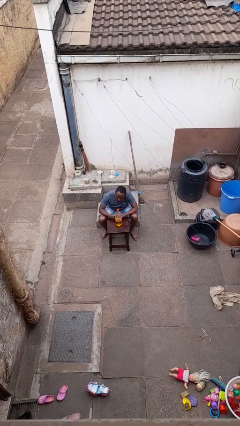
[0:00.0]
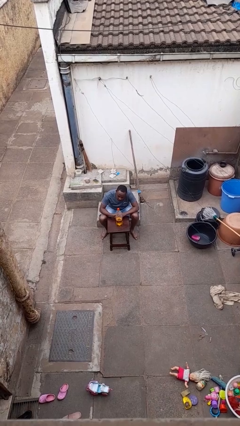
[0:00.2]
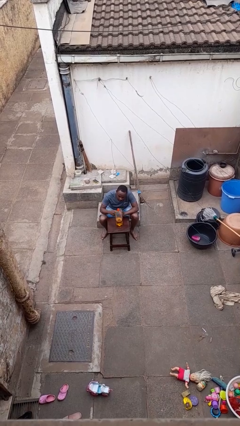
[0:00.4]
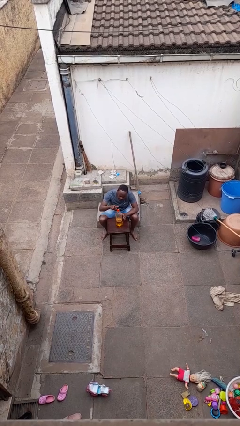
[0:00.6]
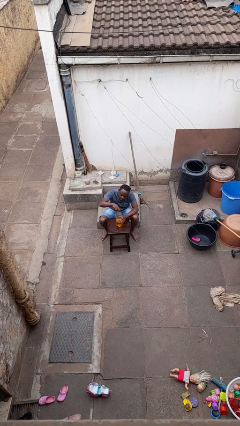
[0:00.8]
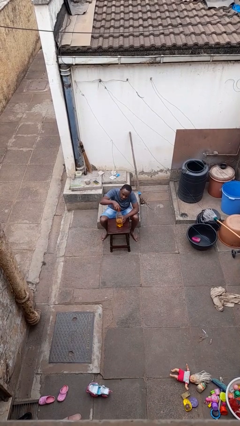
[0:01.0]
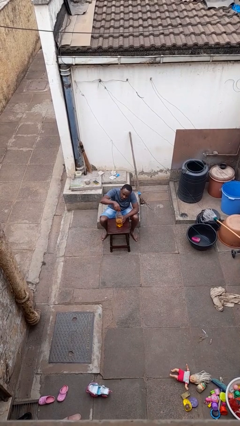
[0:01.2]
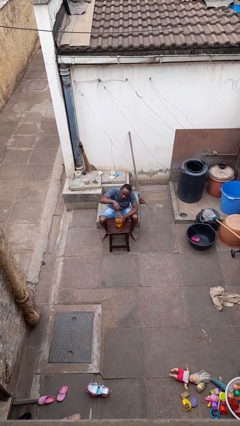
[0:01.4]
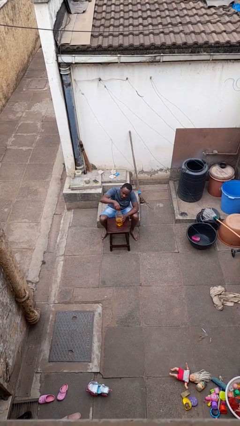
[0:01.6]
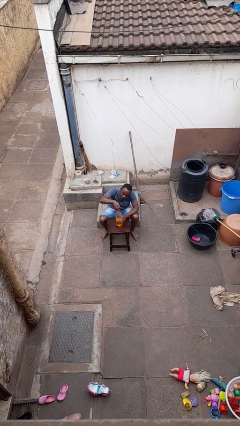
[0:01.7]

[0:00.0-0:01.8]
person unscrews lid from bottle

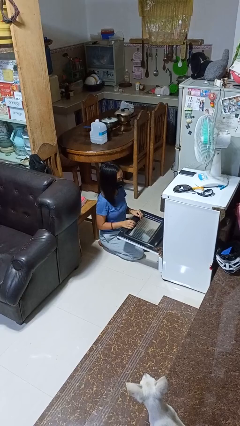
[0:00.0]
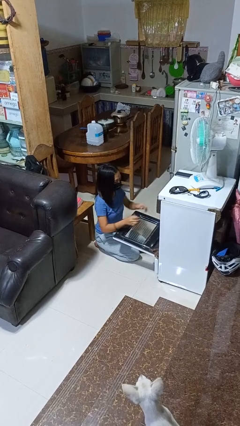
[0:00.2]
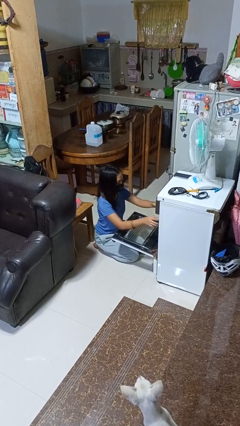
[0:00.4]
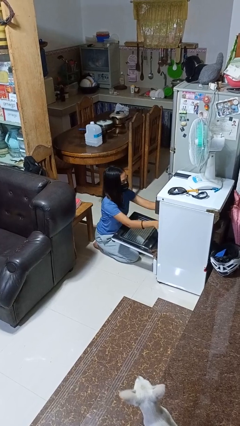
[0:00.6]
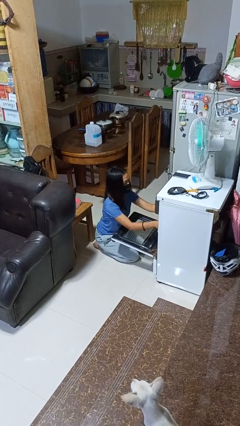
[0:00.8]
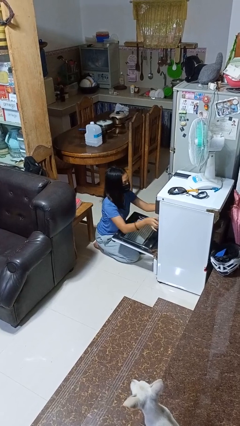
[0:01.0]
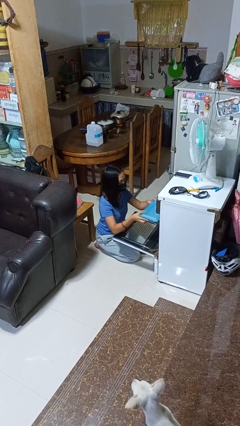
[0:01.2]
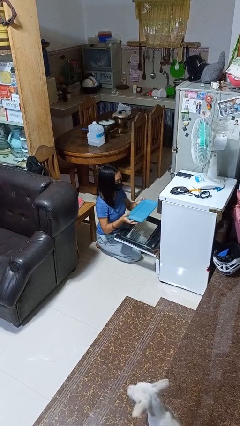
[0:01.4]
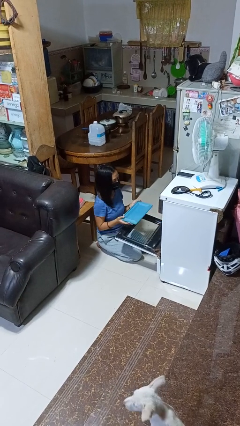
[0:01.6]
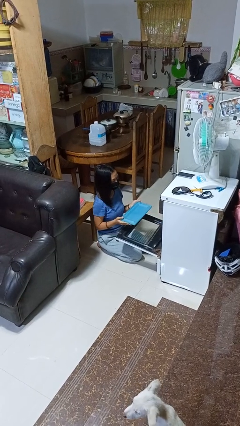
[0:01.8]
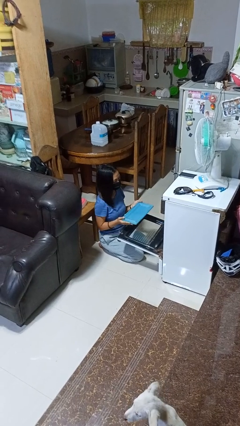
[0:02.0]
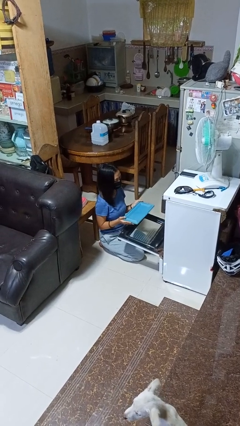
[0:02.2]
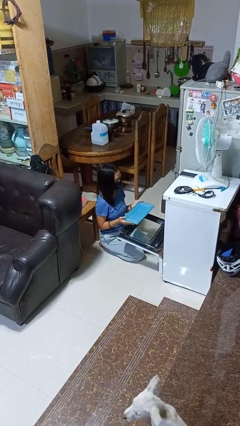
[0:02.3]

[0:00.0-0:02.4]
person takes object from oven

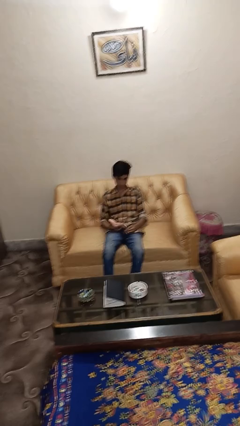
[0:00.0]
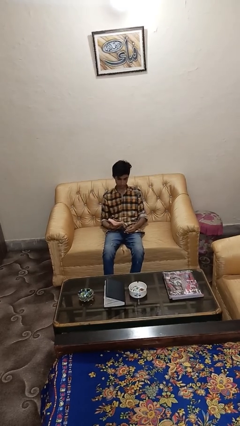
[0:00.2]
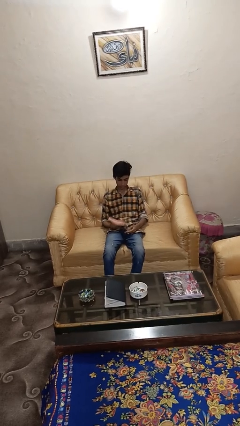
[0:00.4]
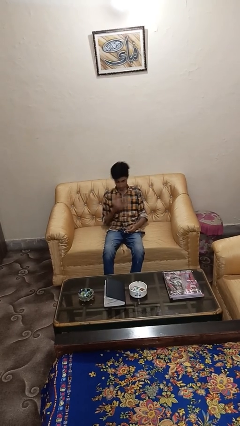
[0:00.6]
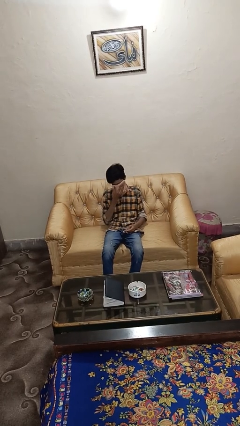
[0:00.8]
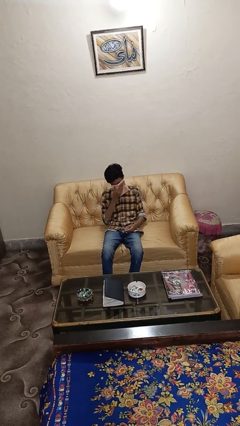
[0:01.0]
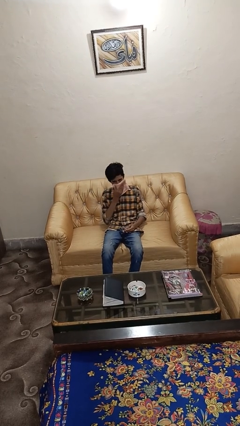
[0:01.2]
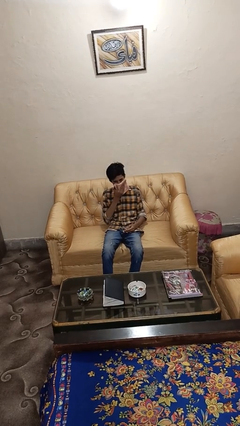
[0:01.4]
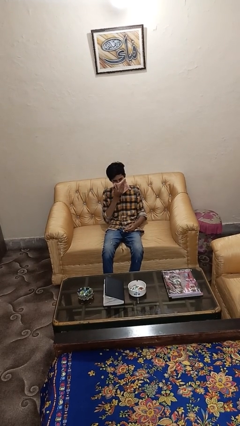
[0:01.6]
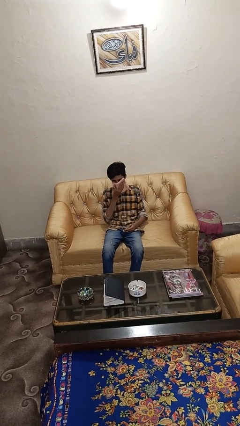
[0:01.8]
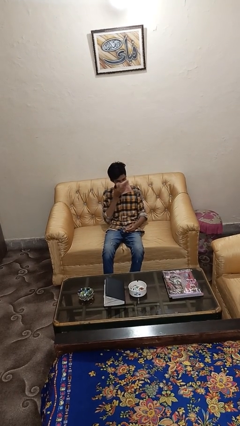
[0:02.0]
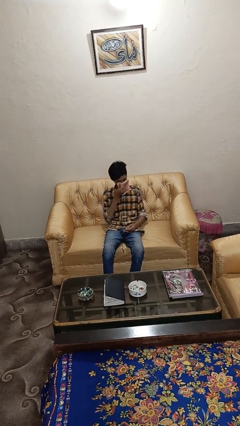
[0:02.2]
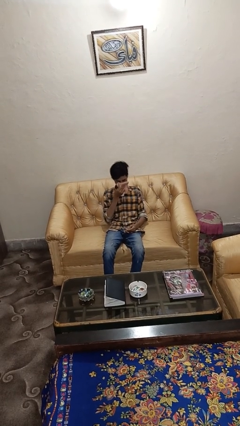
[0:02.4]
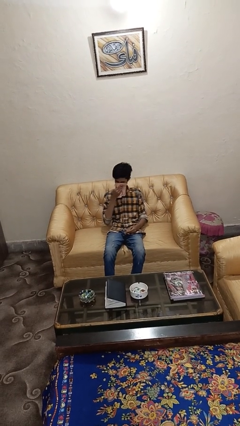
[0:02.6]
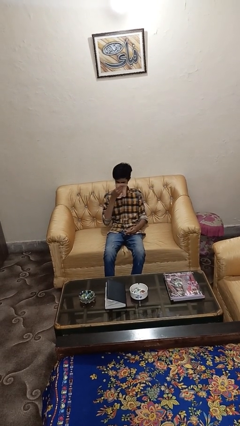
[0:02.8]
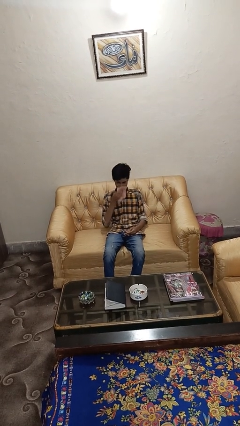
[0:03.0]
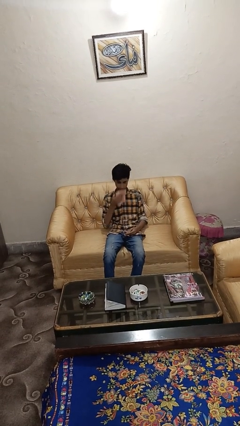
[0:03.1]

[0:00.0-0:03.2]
person blows nose

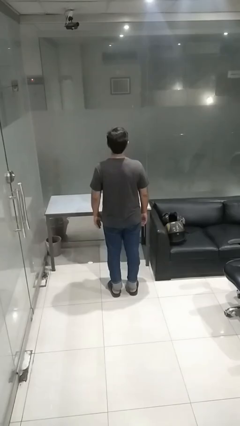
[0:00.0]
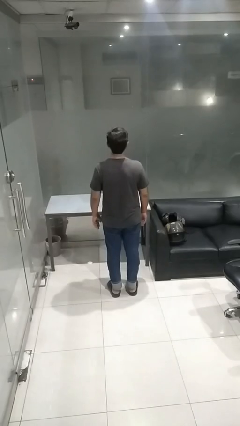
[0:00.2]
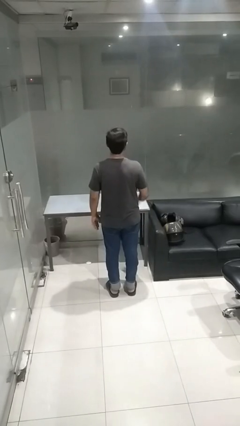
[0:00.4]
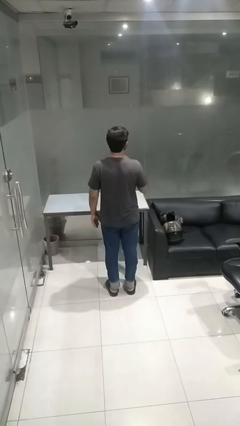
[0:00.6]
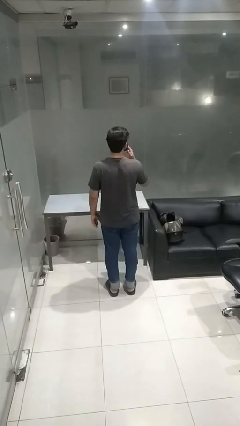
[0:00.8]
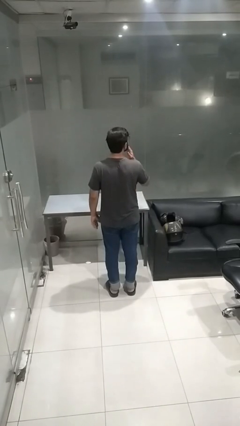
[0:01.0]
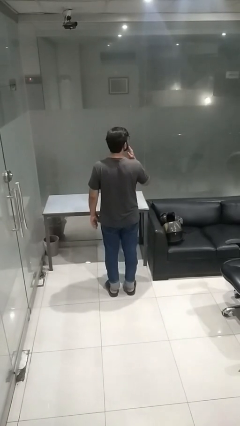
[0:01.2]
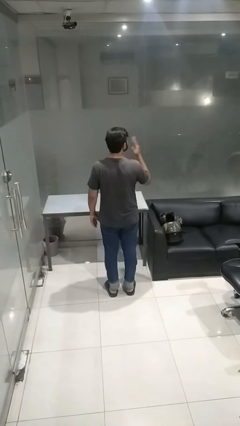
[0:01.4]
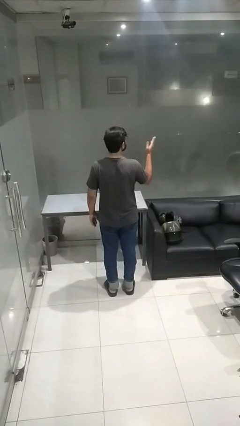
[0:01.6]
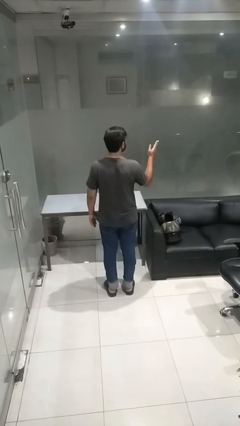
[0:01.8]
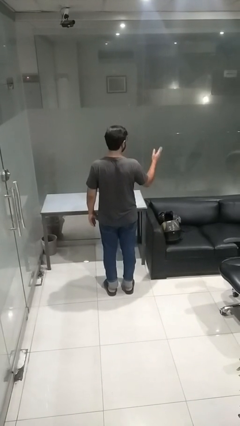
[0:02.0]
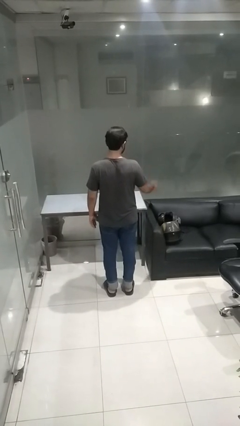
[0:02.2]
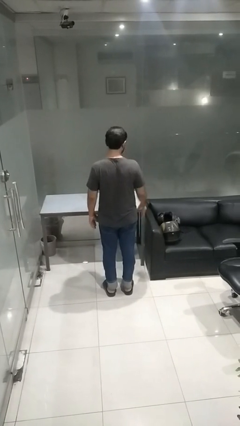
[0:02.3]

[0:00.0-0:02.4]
person gestures blow kiss

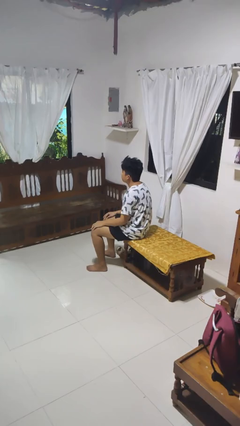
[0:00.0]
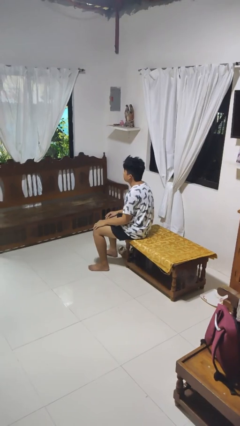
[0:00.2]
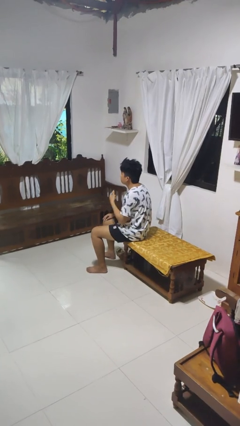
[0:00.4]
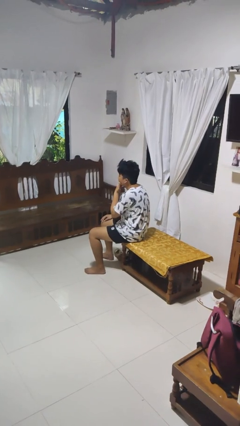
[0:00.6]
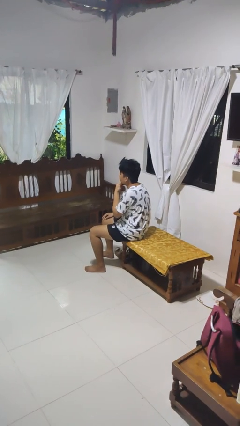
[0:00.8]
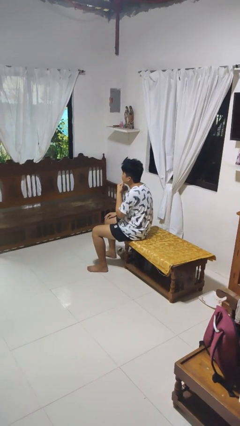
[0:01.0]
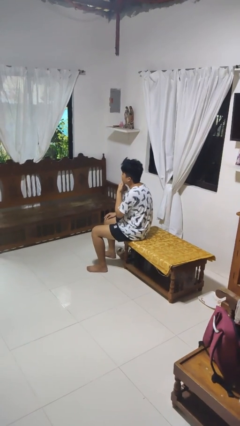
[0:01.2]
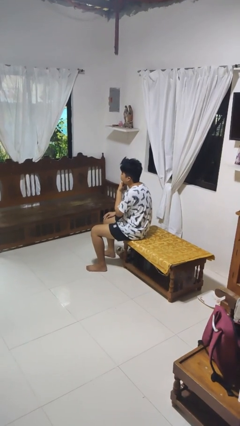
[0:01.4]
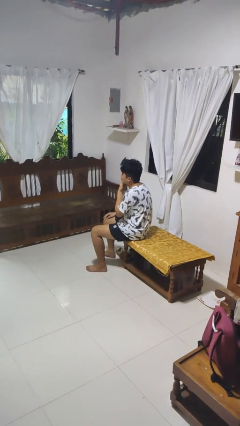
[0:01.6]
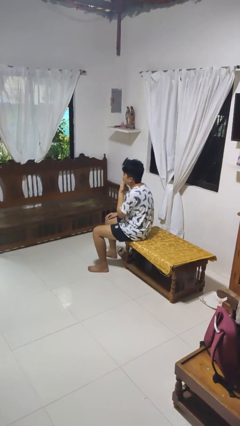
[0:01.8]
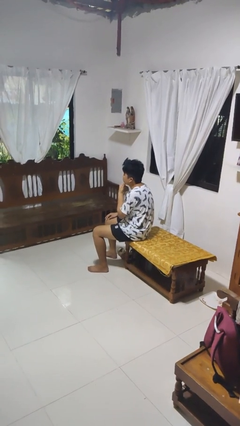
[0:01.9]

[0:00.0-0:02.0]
person strokes chin

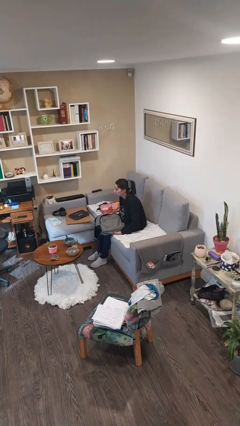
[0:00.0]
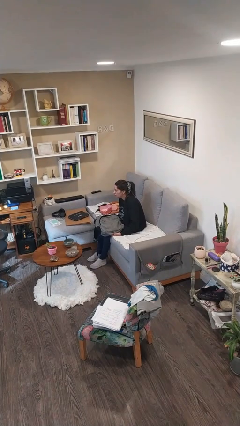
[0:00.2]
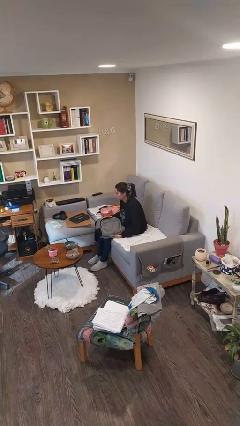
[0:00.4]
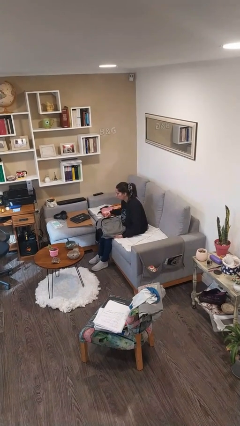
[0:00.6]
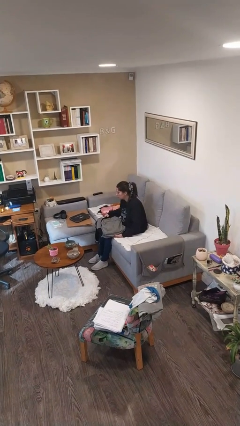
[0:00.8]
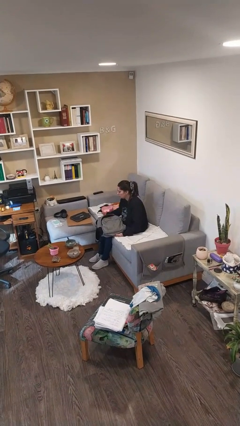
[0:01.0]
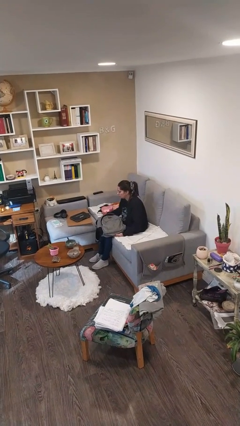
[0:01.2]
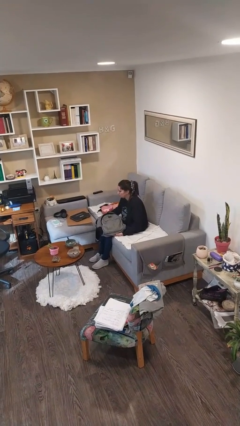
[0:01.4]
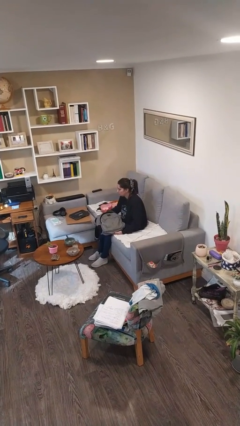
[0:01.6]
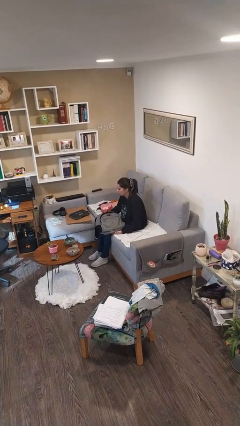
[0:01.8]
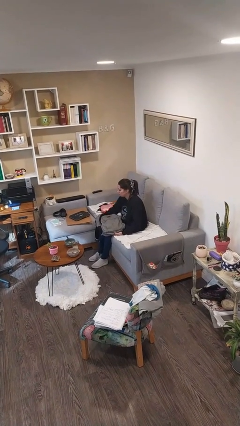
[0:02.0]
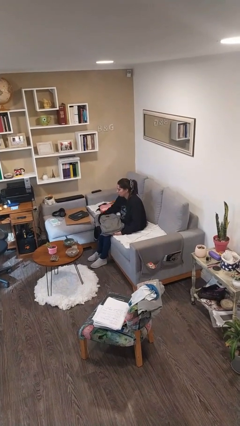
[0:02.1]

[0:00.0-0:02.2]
person searches in backpack

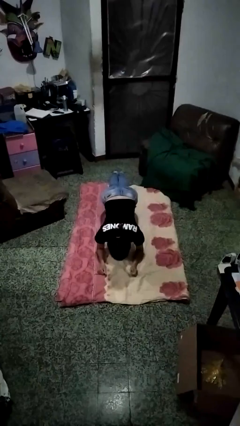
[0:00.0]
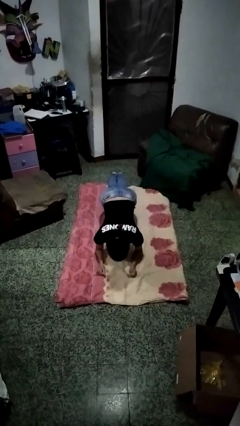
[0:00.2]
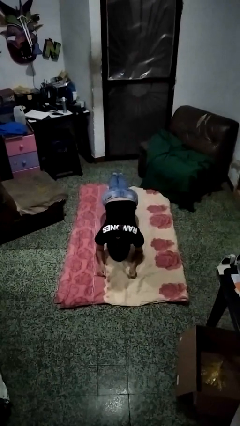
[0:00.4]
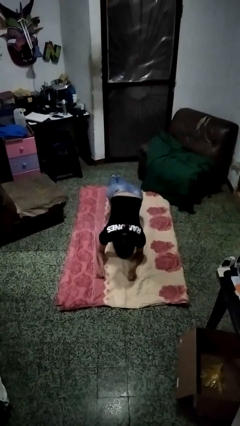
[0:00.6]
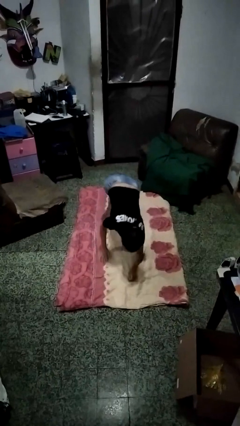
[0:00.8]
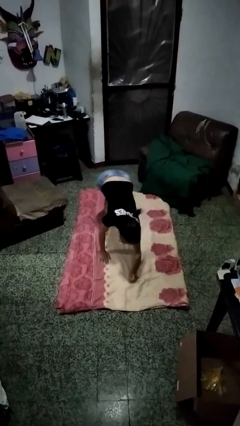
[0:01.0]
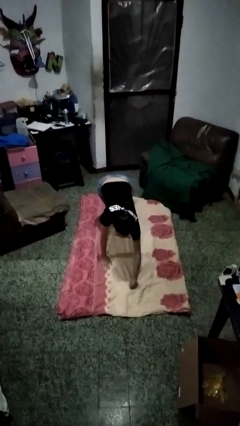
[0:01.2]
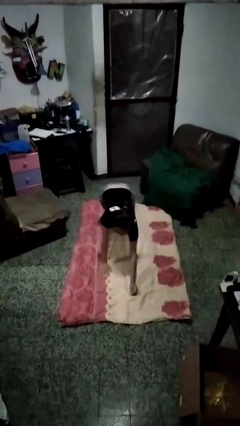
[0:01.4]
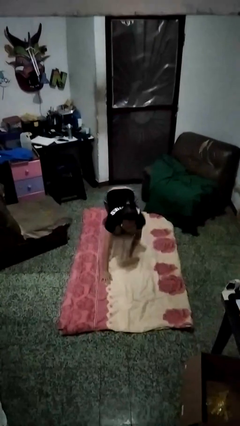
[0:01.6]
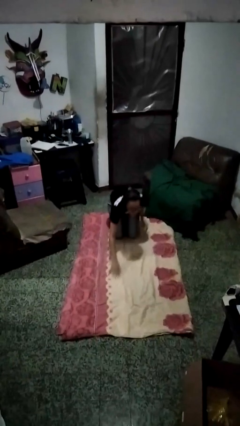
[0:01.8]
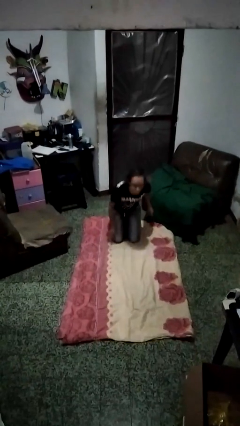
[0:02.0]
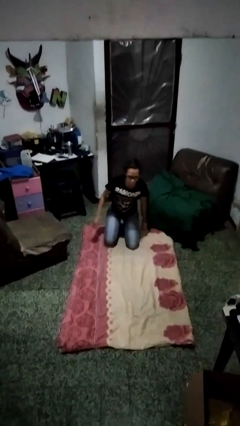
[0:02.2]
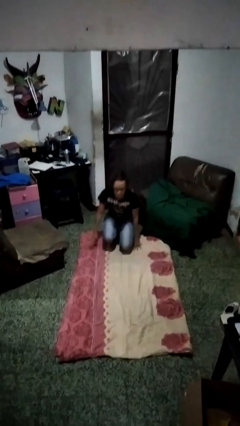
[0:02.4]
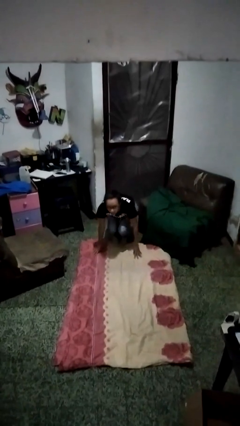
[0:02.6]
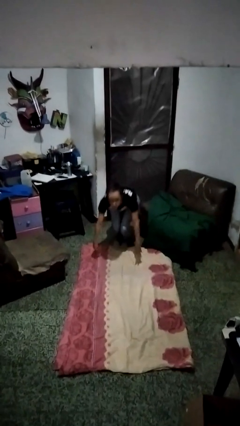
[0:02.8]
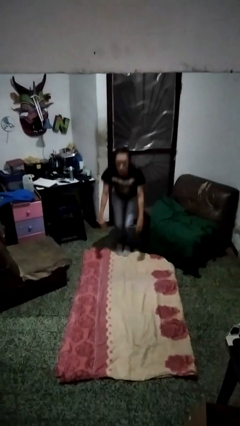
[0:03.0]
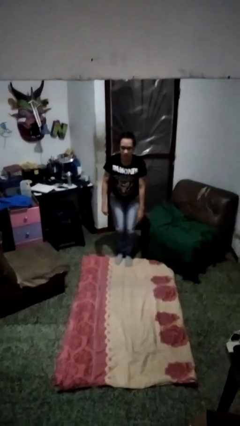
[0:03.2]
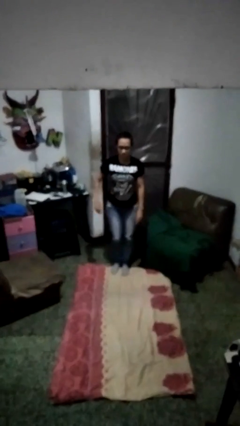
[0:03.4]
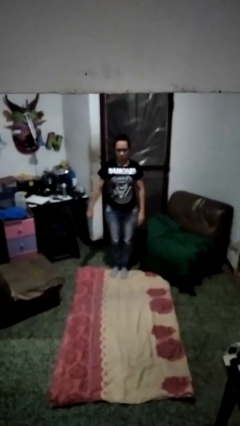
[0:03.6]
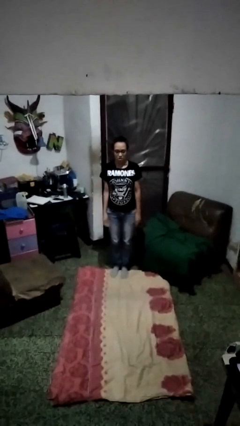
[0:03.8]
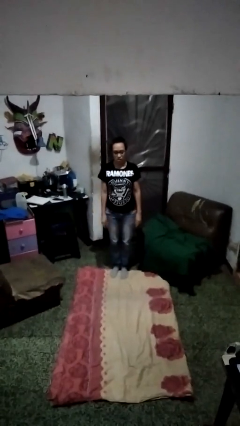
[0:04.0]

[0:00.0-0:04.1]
person stands up from floor
